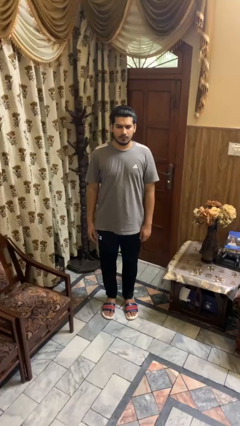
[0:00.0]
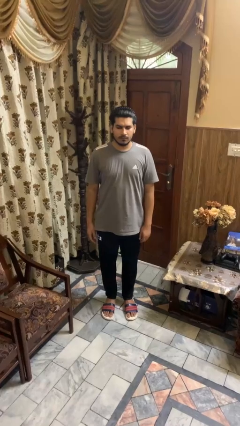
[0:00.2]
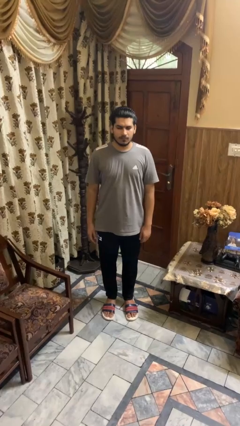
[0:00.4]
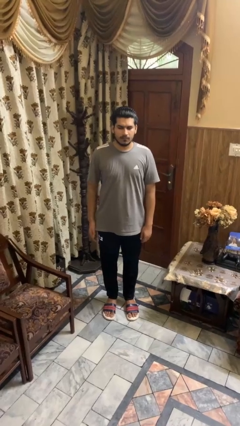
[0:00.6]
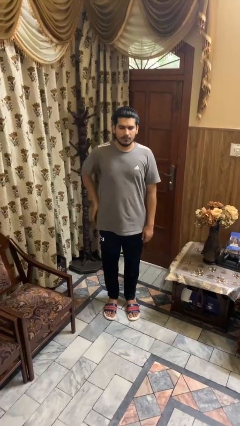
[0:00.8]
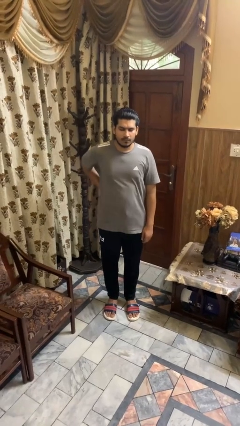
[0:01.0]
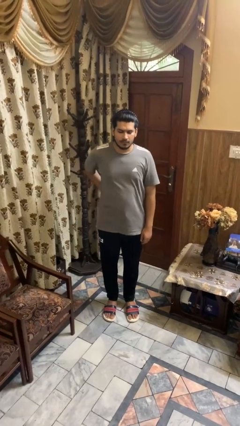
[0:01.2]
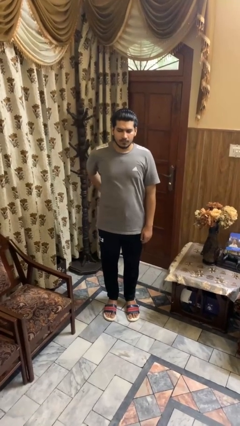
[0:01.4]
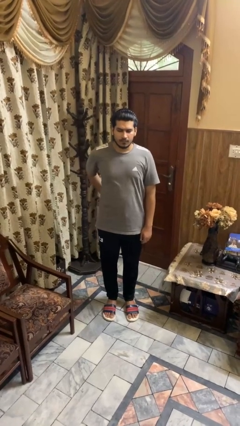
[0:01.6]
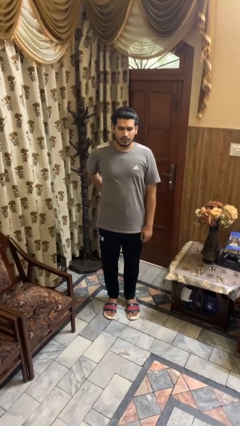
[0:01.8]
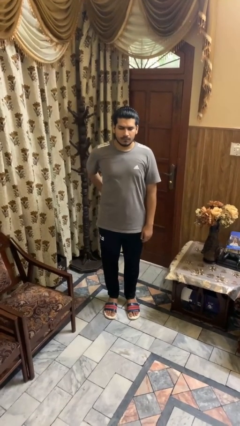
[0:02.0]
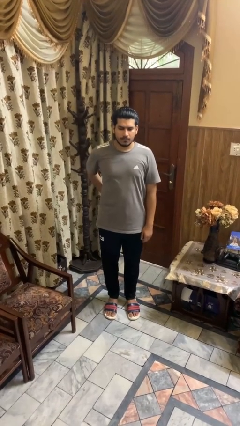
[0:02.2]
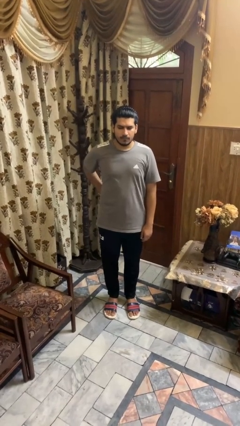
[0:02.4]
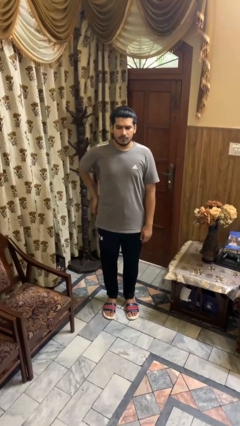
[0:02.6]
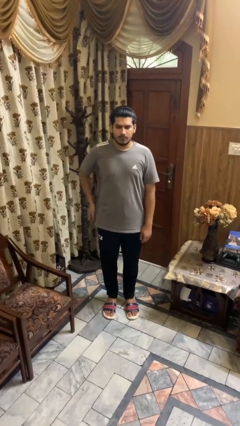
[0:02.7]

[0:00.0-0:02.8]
person puts hands in back pockets

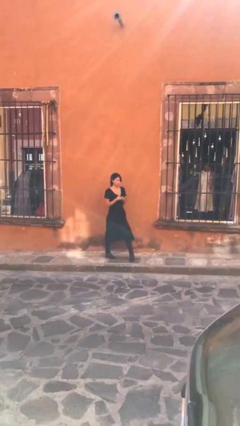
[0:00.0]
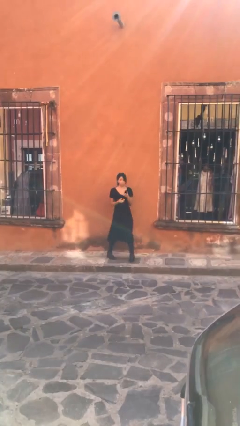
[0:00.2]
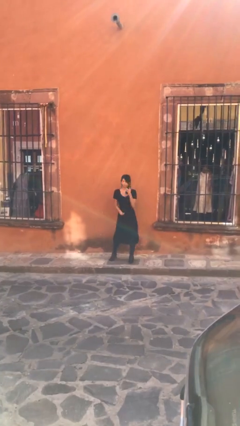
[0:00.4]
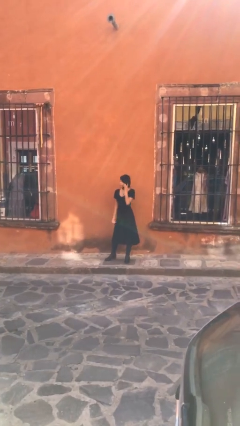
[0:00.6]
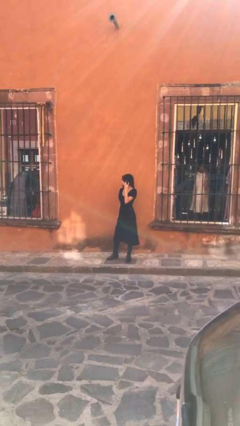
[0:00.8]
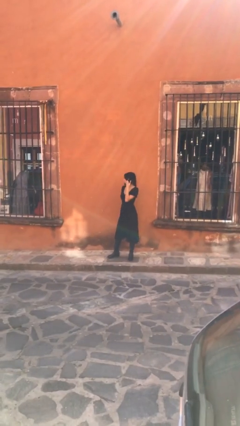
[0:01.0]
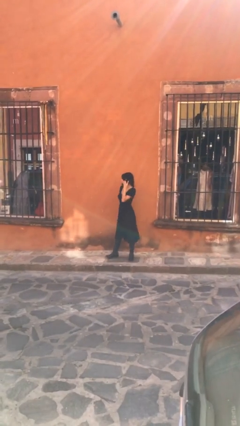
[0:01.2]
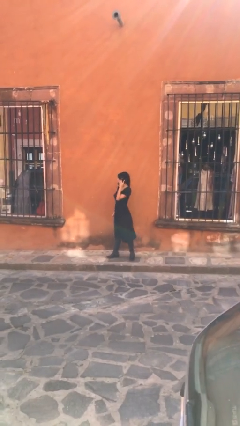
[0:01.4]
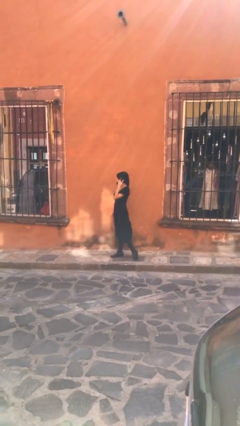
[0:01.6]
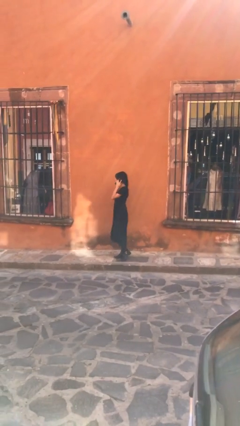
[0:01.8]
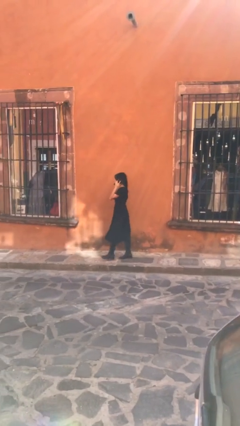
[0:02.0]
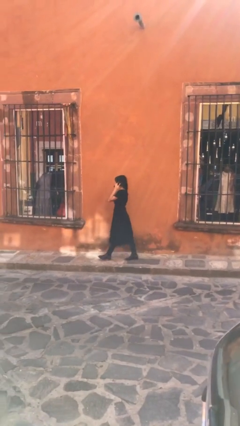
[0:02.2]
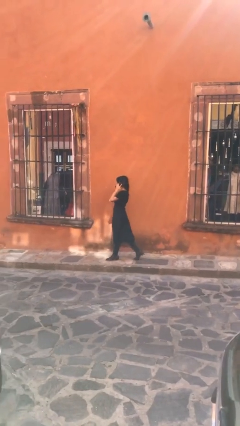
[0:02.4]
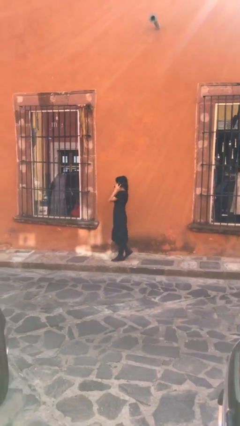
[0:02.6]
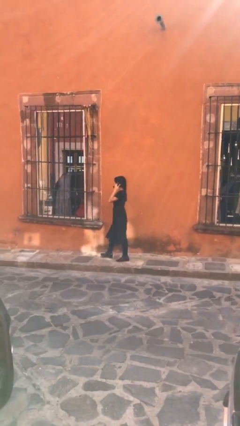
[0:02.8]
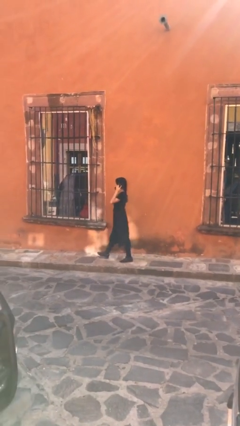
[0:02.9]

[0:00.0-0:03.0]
person talks on phone

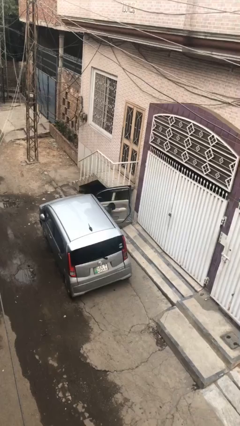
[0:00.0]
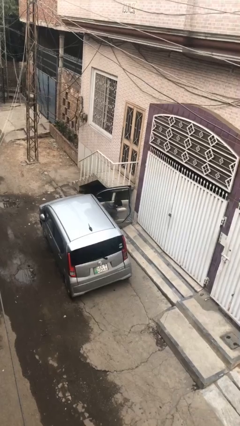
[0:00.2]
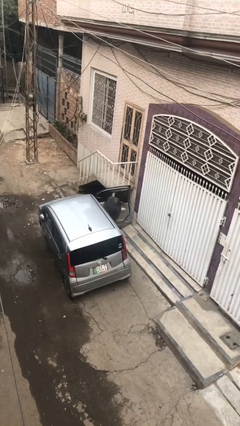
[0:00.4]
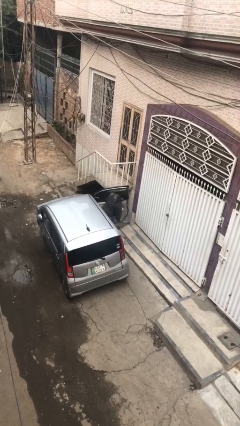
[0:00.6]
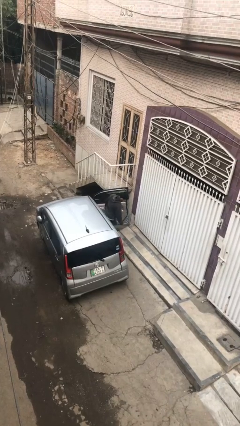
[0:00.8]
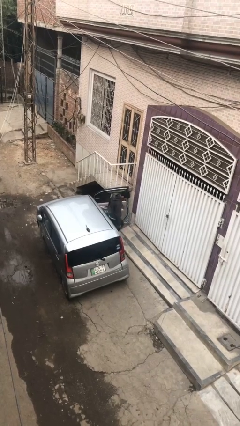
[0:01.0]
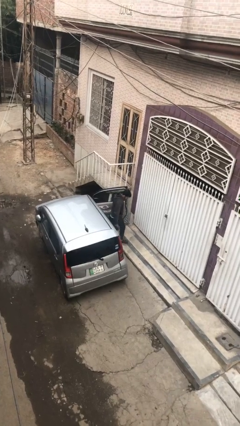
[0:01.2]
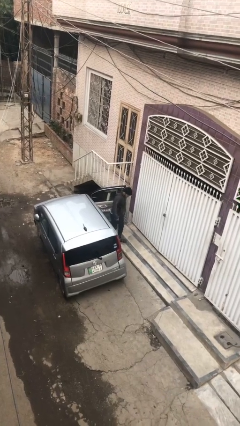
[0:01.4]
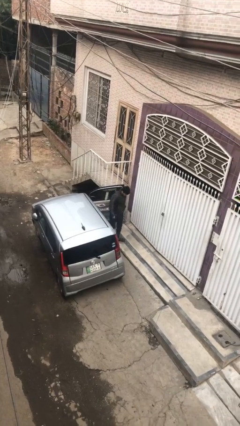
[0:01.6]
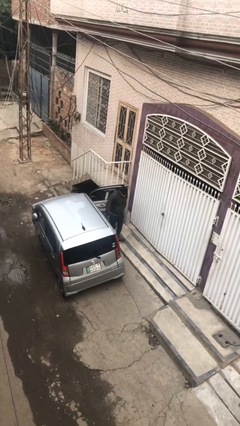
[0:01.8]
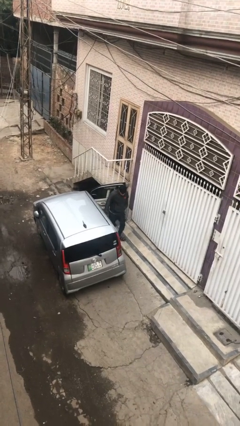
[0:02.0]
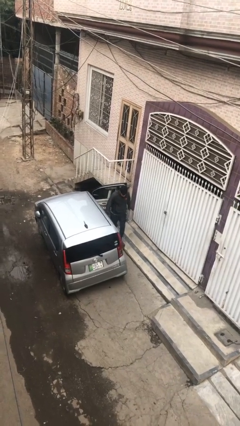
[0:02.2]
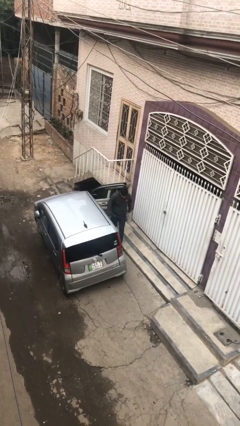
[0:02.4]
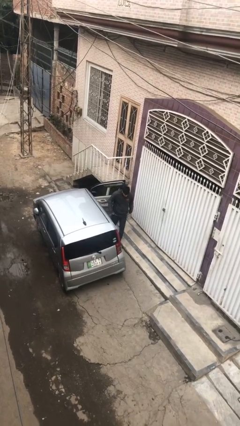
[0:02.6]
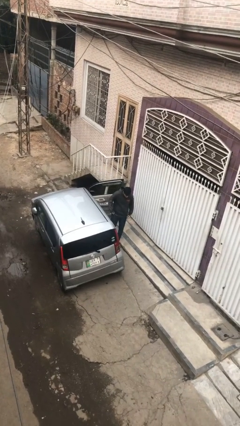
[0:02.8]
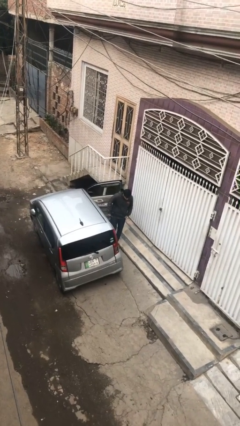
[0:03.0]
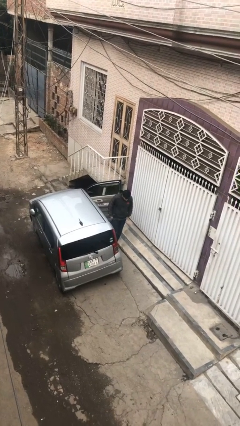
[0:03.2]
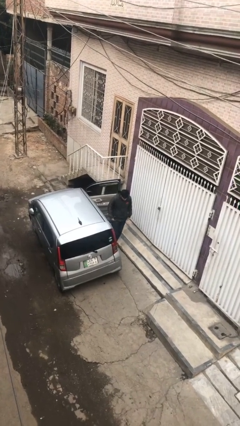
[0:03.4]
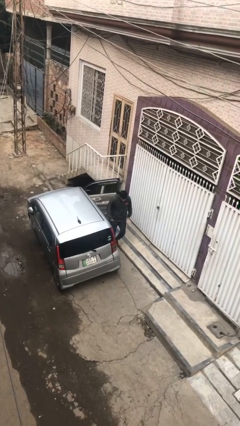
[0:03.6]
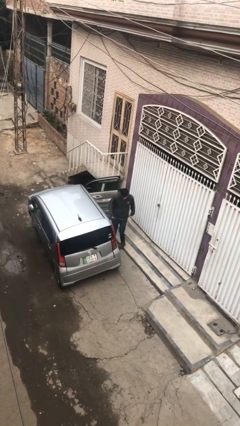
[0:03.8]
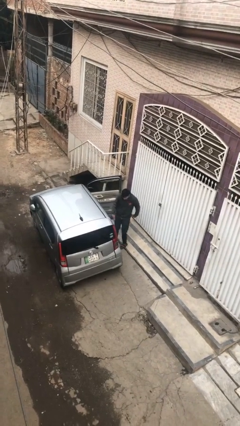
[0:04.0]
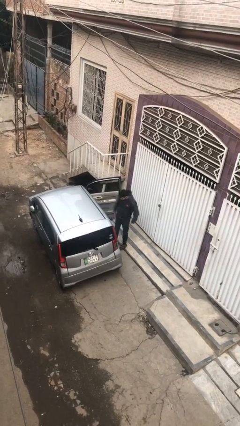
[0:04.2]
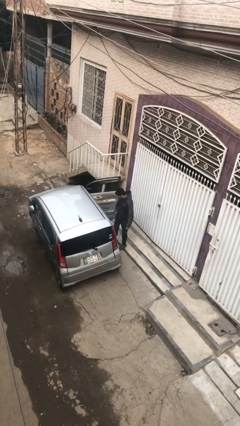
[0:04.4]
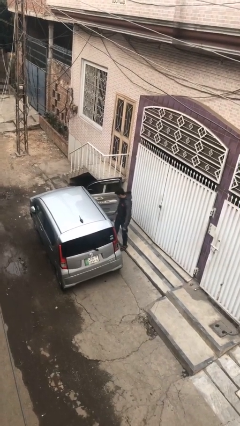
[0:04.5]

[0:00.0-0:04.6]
person exits car

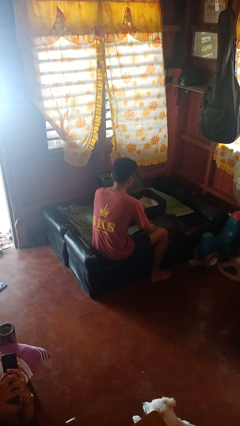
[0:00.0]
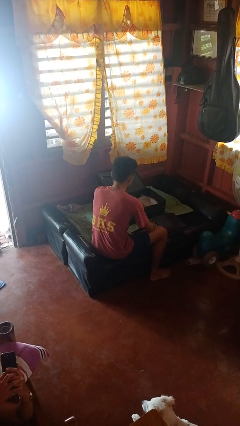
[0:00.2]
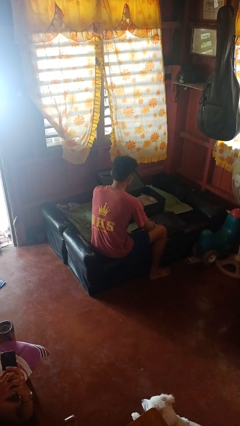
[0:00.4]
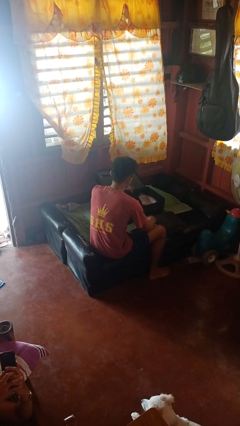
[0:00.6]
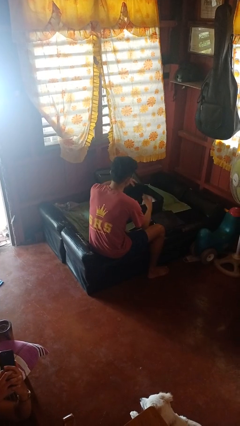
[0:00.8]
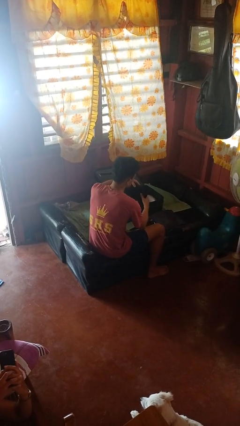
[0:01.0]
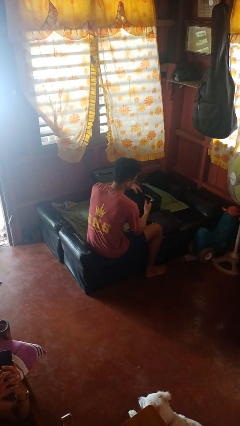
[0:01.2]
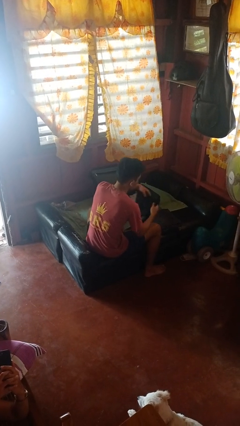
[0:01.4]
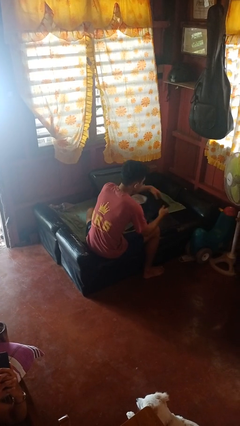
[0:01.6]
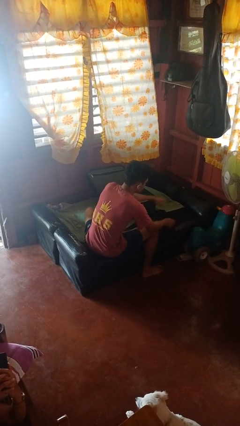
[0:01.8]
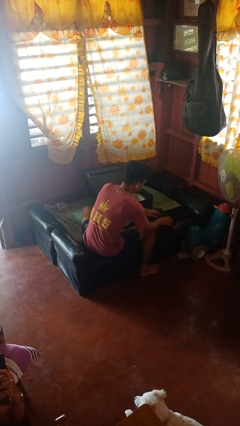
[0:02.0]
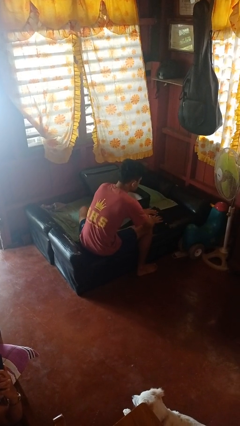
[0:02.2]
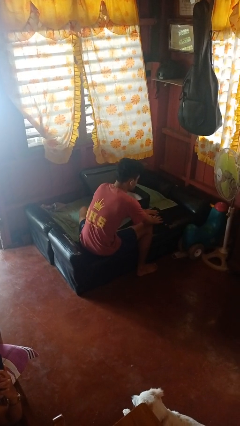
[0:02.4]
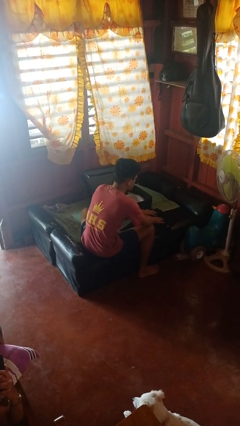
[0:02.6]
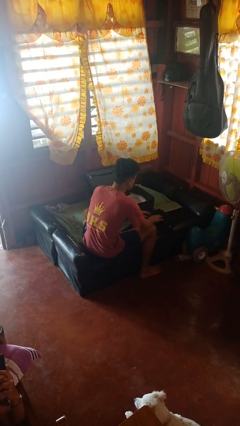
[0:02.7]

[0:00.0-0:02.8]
person unloads clothes from suitcase

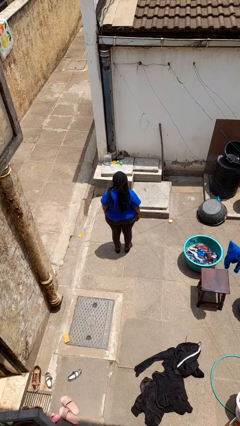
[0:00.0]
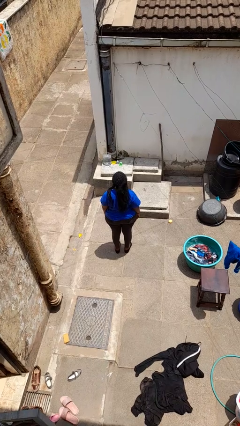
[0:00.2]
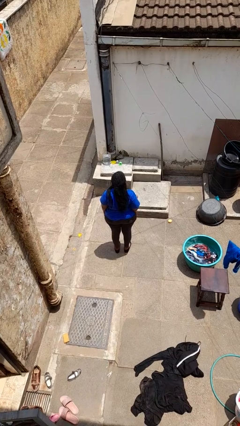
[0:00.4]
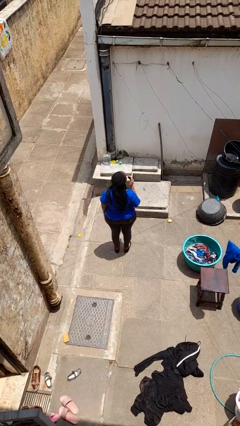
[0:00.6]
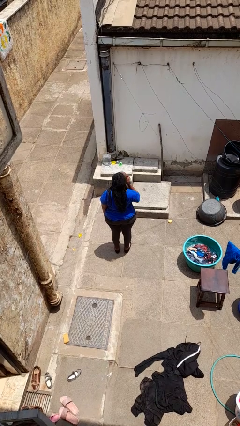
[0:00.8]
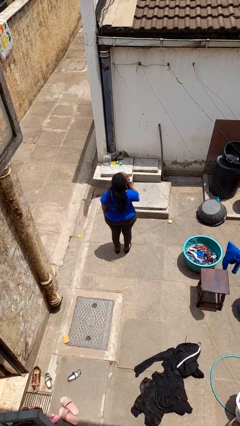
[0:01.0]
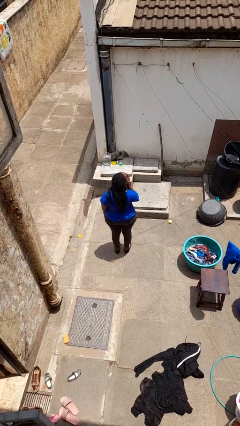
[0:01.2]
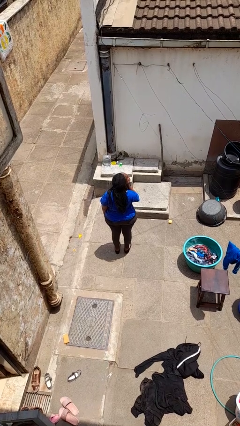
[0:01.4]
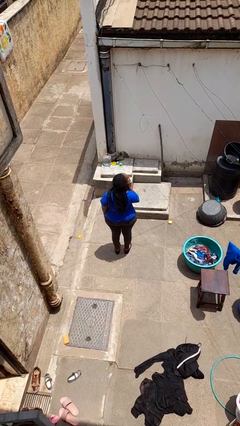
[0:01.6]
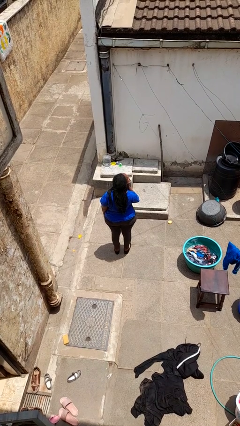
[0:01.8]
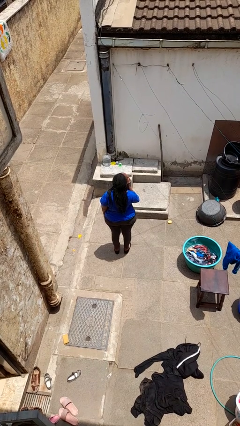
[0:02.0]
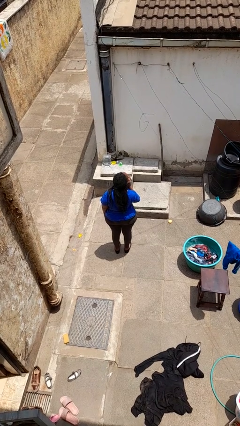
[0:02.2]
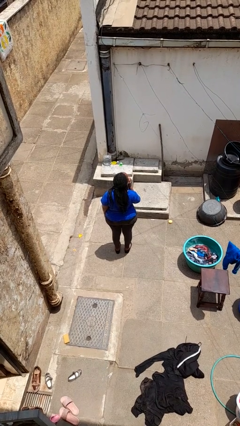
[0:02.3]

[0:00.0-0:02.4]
person yawns

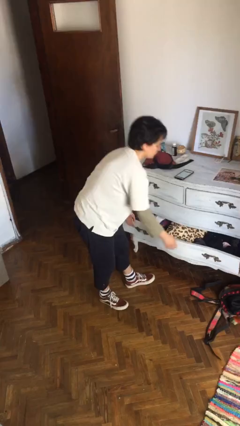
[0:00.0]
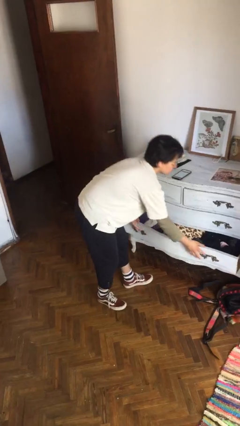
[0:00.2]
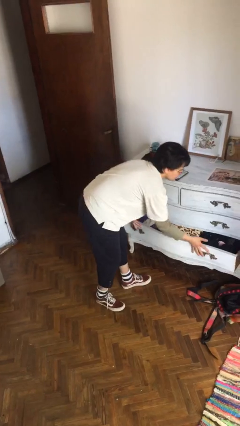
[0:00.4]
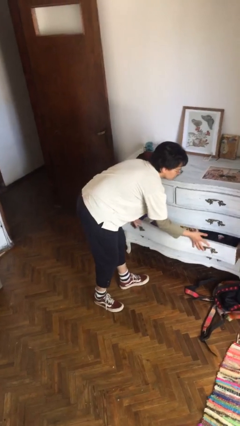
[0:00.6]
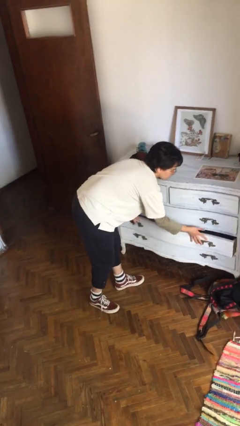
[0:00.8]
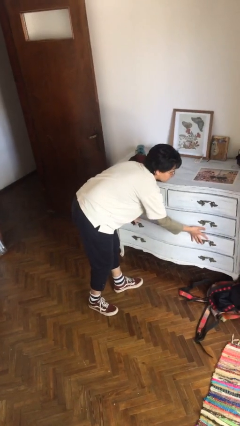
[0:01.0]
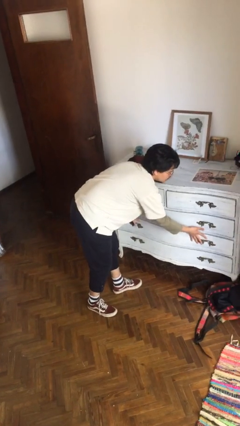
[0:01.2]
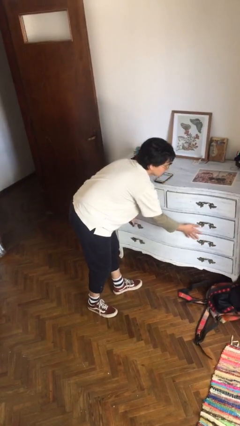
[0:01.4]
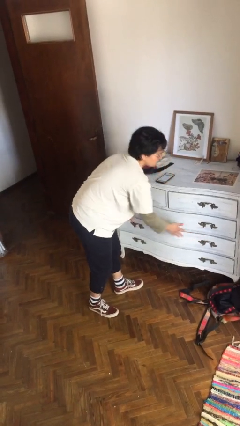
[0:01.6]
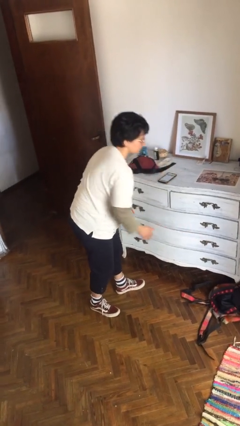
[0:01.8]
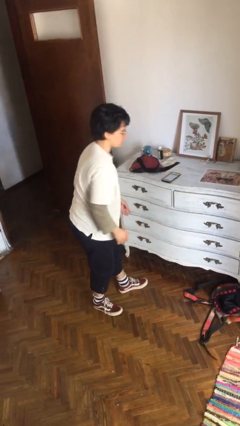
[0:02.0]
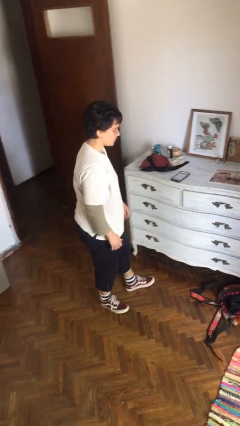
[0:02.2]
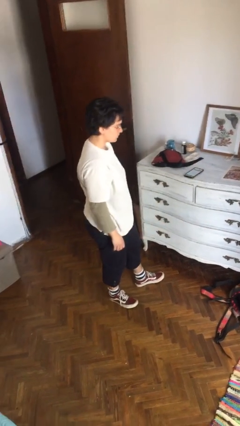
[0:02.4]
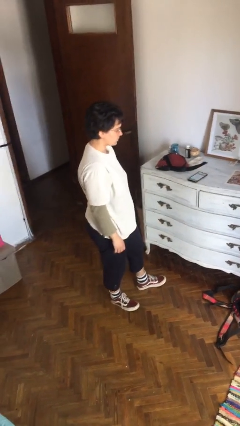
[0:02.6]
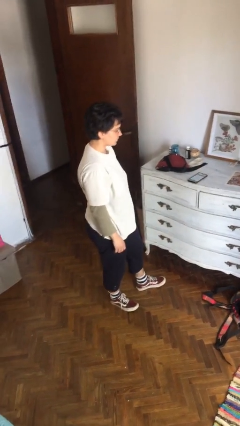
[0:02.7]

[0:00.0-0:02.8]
person closes dresser drawer
